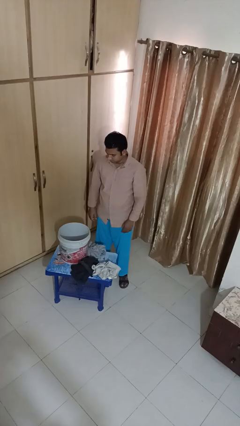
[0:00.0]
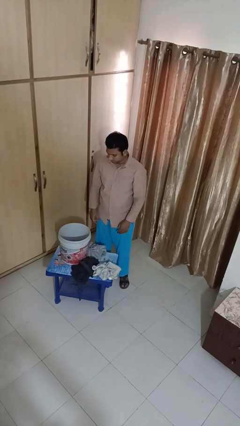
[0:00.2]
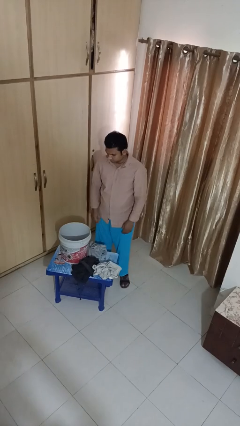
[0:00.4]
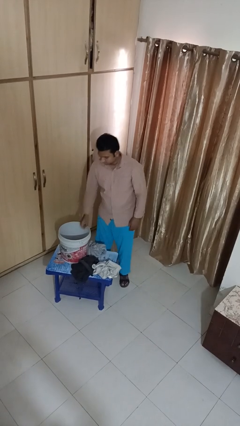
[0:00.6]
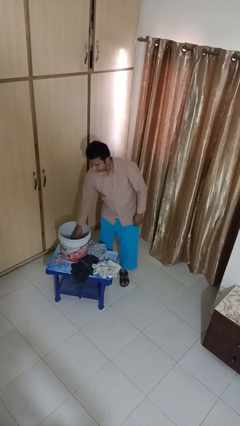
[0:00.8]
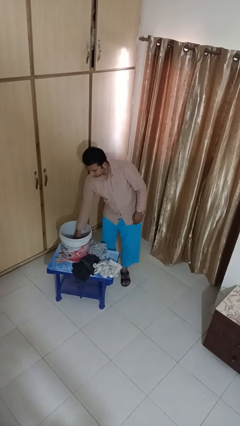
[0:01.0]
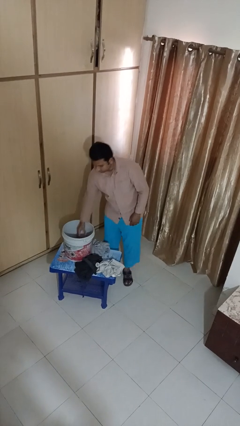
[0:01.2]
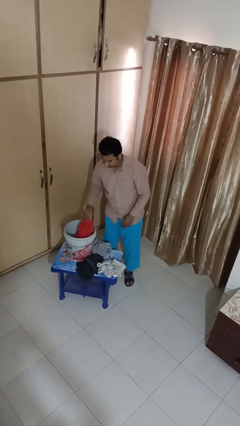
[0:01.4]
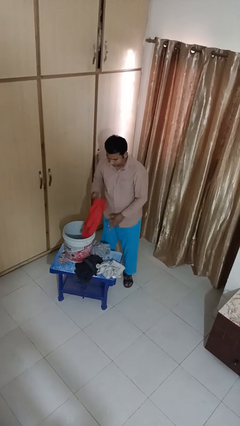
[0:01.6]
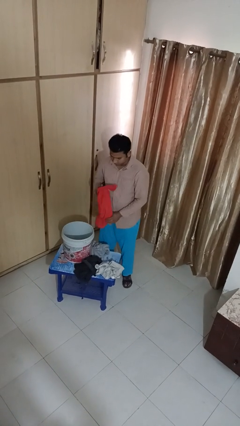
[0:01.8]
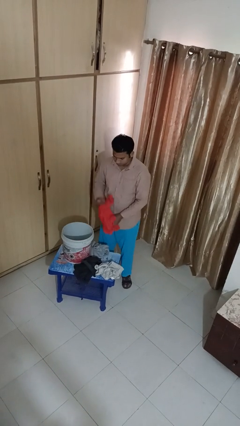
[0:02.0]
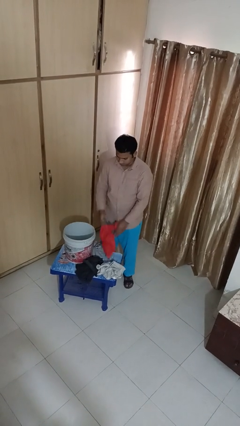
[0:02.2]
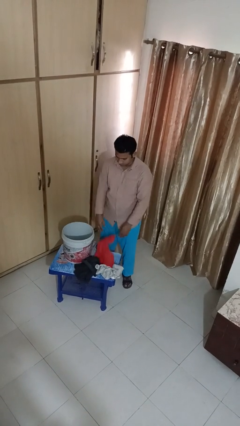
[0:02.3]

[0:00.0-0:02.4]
person takes object from basket

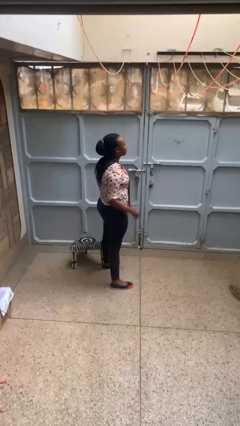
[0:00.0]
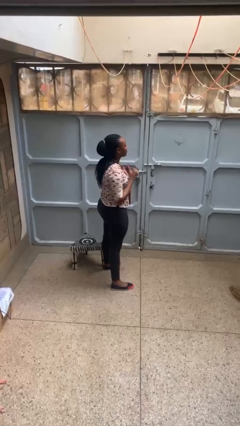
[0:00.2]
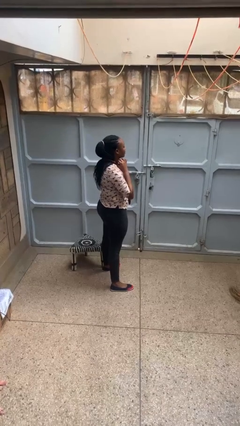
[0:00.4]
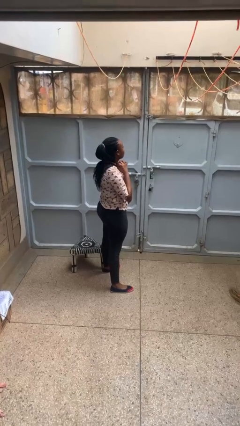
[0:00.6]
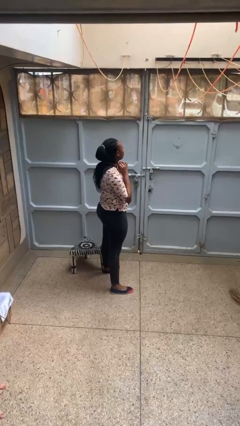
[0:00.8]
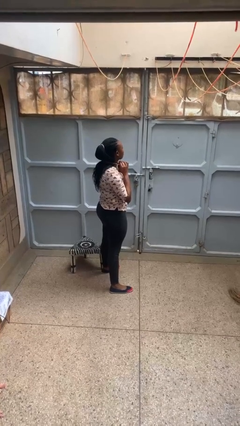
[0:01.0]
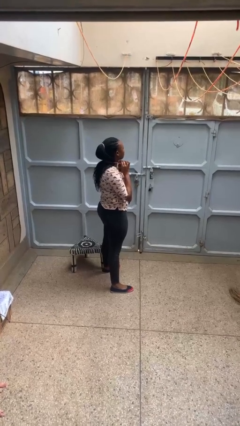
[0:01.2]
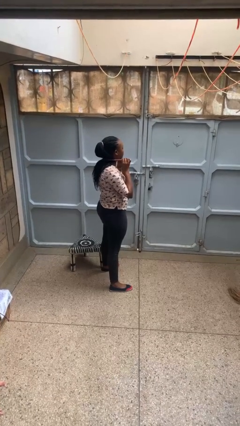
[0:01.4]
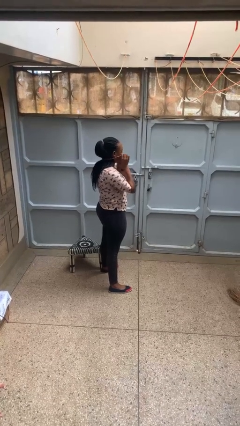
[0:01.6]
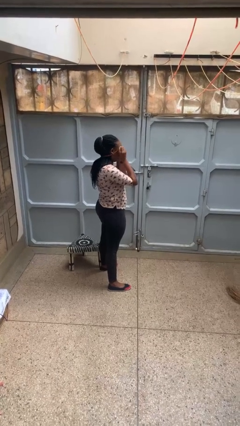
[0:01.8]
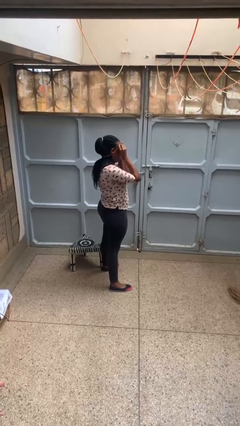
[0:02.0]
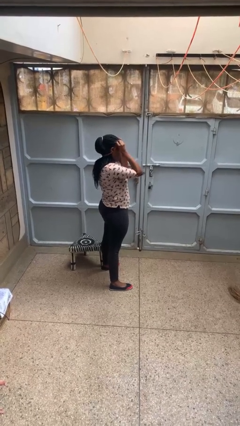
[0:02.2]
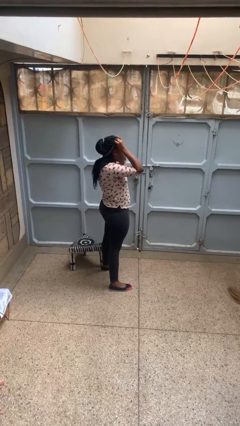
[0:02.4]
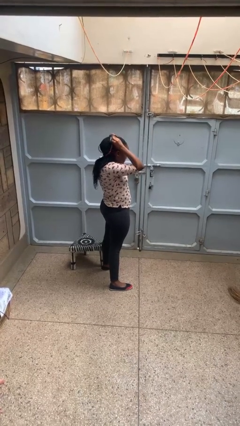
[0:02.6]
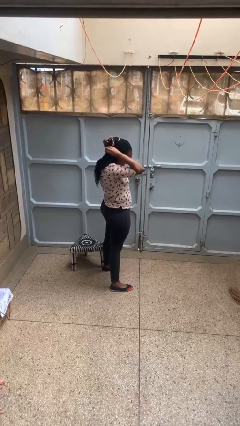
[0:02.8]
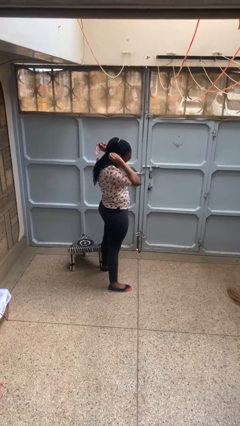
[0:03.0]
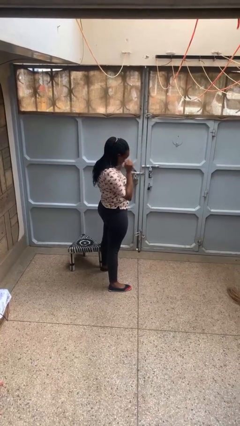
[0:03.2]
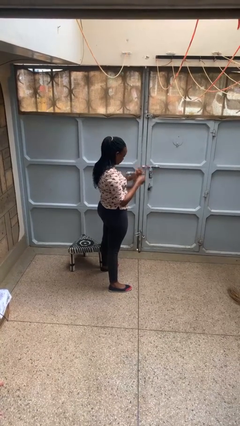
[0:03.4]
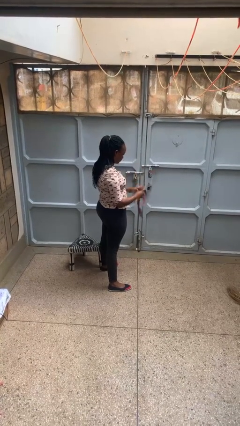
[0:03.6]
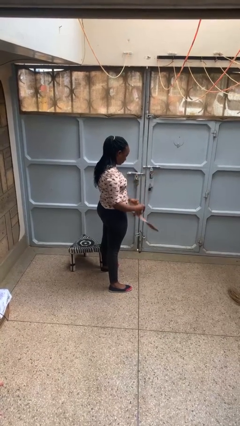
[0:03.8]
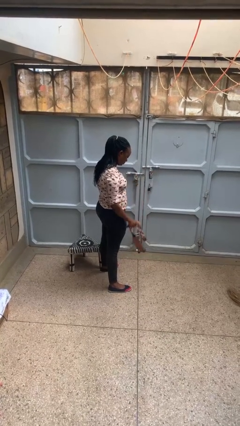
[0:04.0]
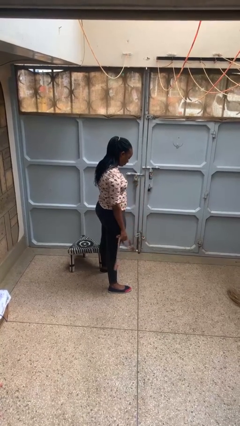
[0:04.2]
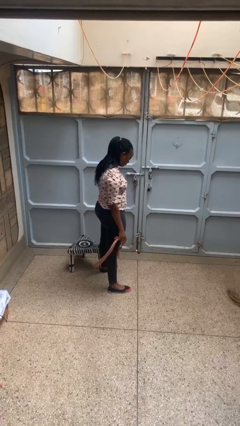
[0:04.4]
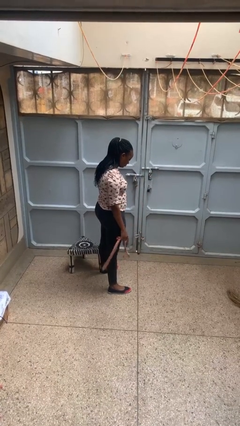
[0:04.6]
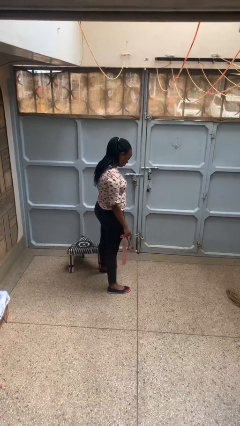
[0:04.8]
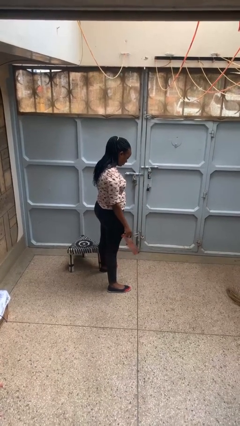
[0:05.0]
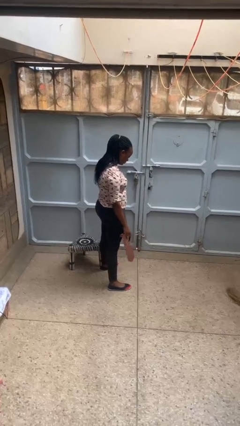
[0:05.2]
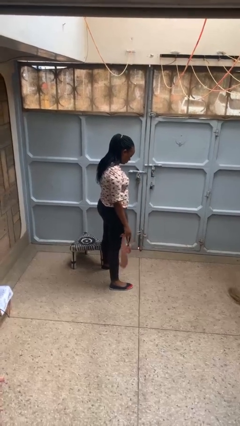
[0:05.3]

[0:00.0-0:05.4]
person takes off necktie

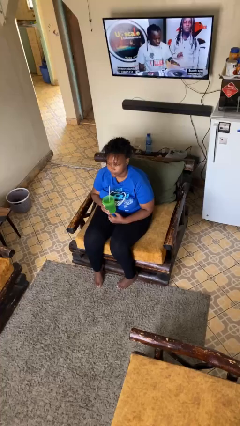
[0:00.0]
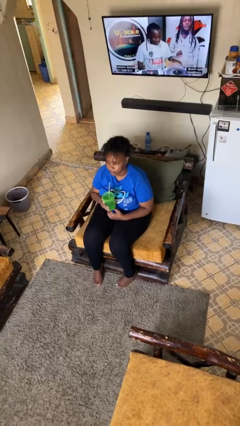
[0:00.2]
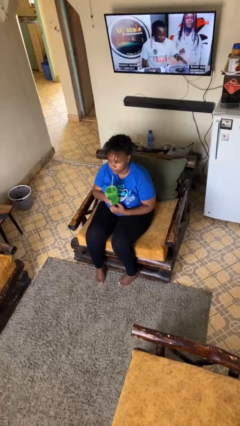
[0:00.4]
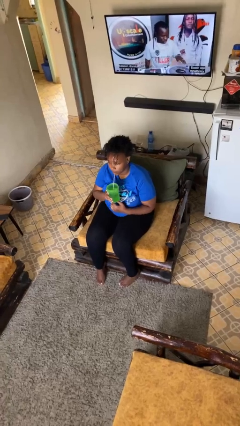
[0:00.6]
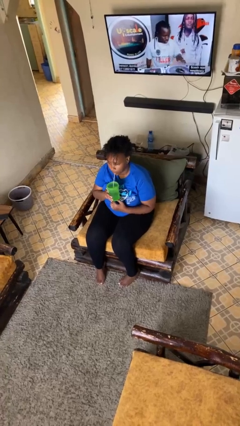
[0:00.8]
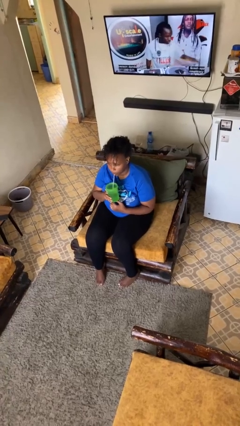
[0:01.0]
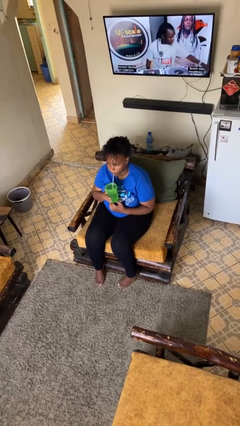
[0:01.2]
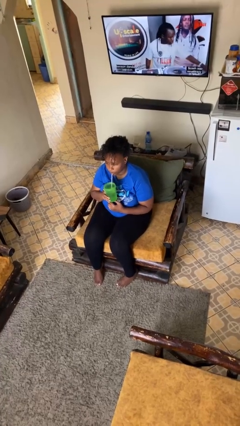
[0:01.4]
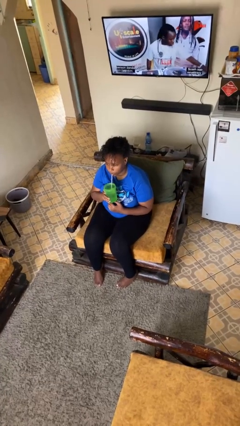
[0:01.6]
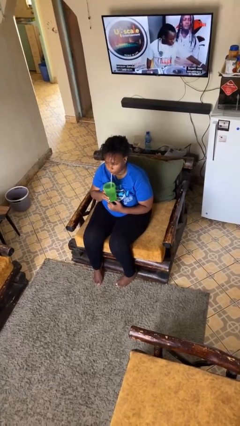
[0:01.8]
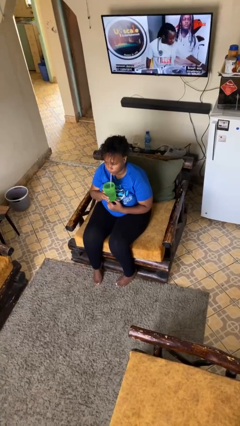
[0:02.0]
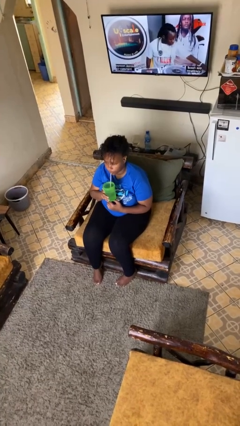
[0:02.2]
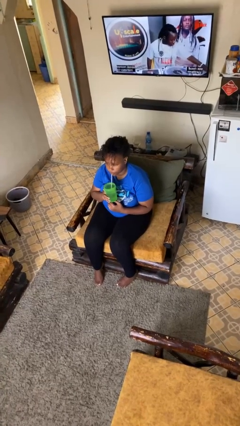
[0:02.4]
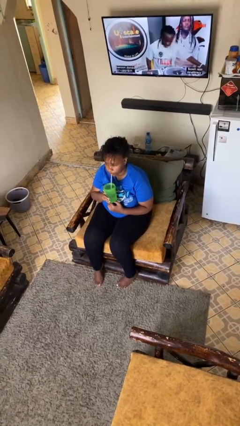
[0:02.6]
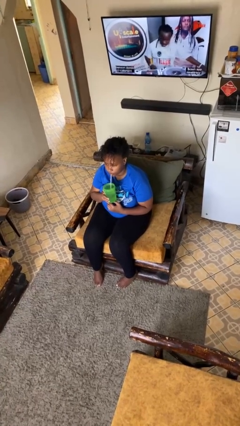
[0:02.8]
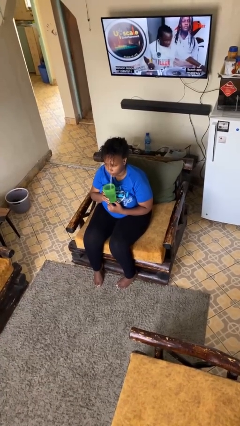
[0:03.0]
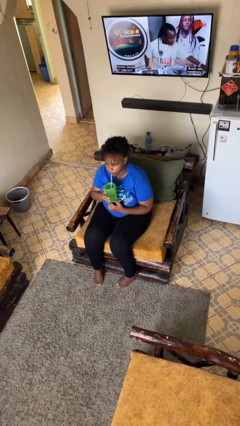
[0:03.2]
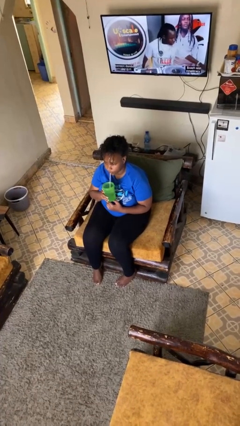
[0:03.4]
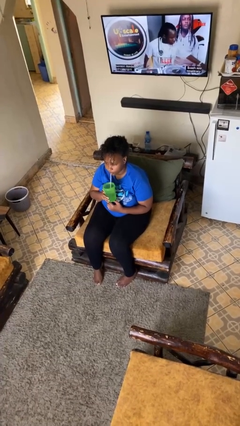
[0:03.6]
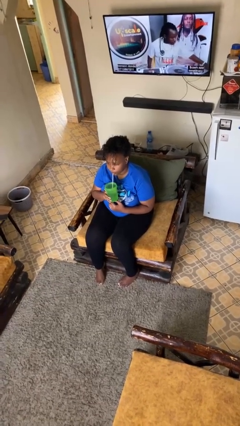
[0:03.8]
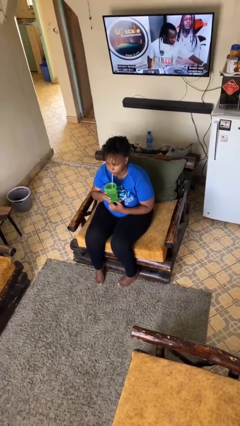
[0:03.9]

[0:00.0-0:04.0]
person drinks from straw

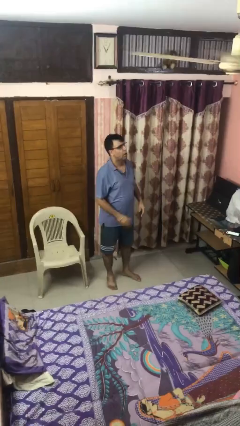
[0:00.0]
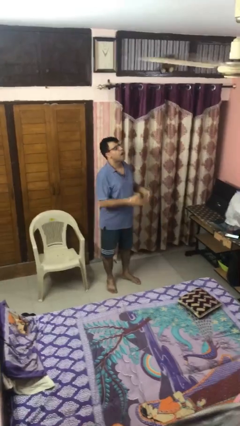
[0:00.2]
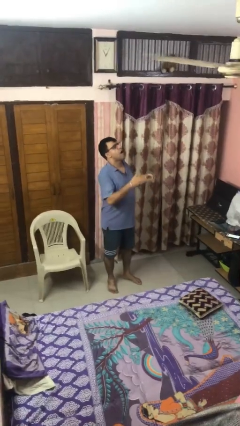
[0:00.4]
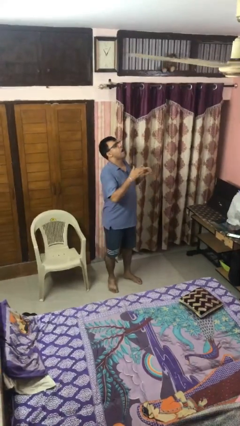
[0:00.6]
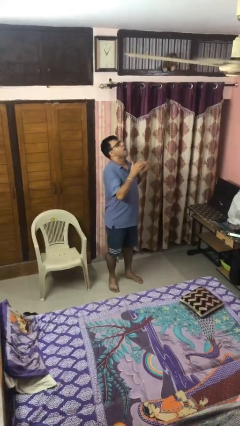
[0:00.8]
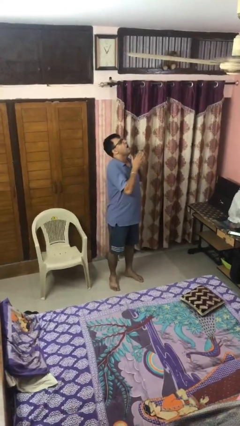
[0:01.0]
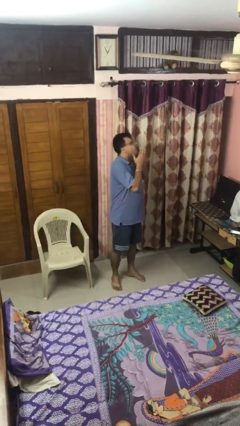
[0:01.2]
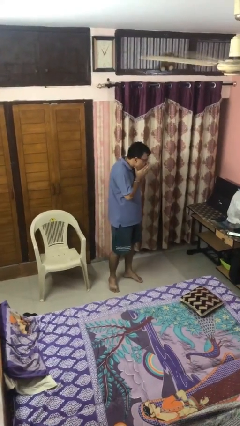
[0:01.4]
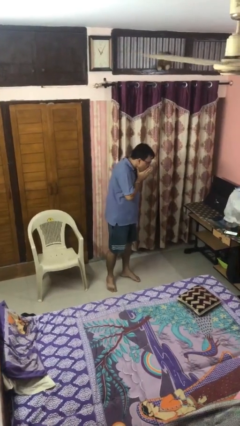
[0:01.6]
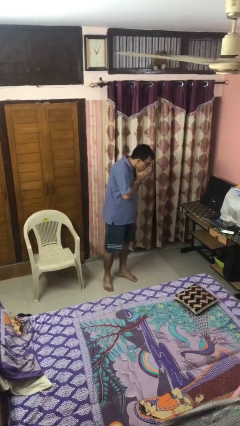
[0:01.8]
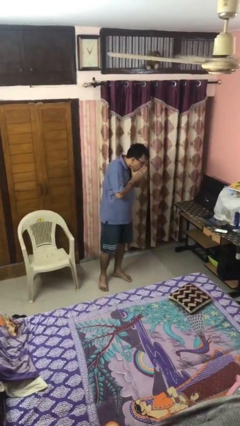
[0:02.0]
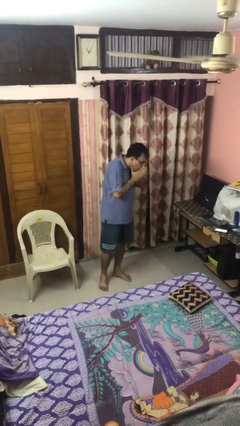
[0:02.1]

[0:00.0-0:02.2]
person sneezes into hand

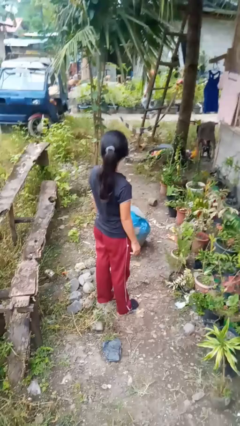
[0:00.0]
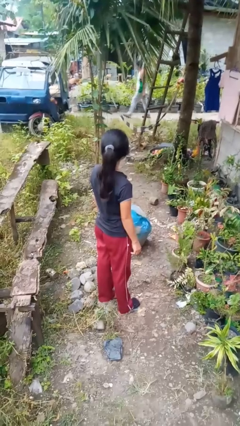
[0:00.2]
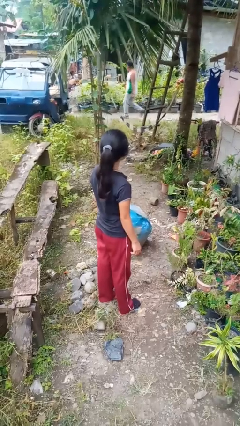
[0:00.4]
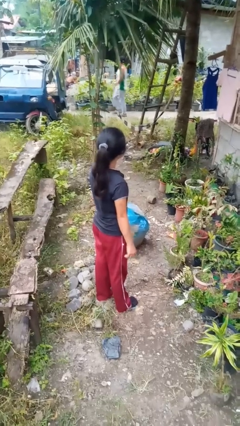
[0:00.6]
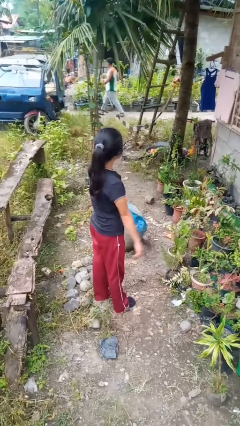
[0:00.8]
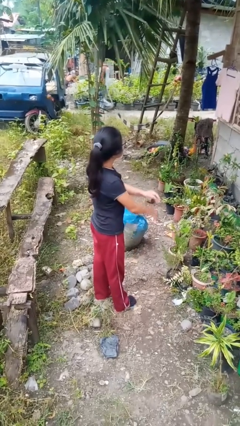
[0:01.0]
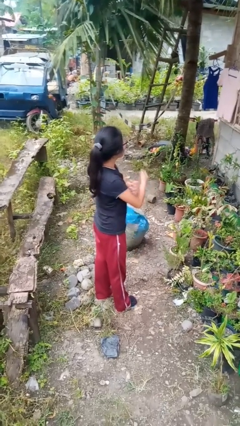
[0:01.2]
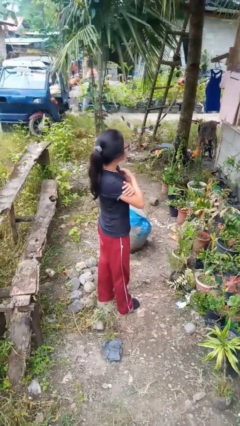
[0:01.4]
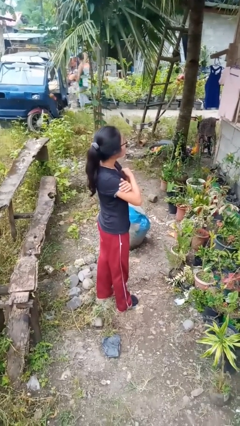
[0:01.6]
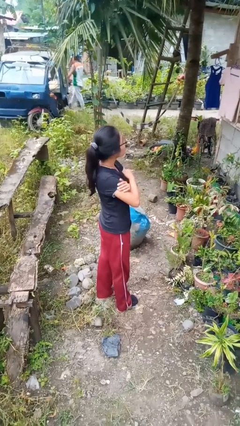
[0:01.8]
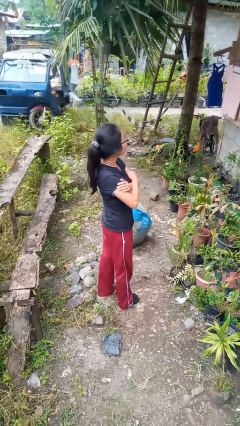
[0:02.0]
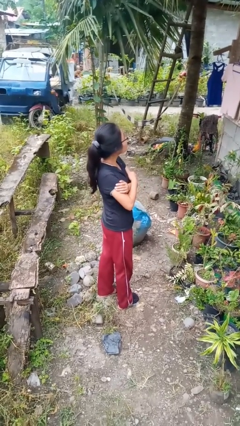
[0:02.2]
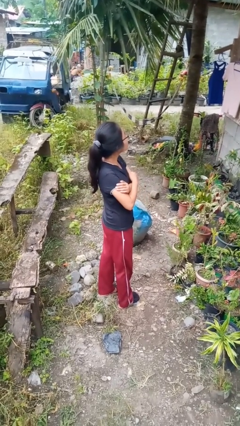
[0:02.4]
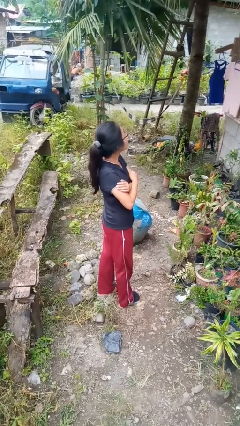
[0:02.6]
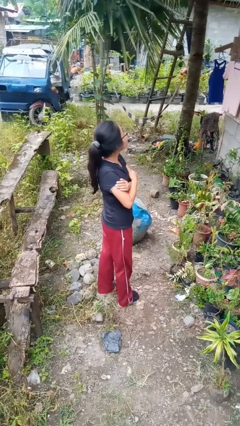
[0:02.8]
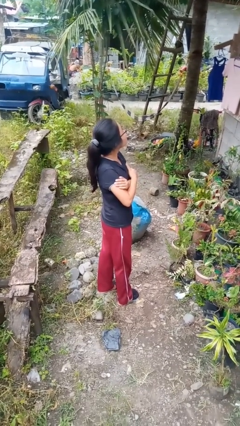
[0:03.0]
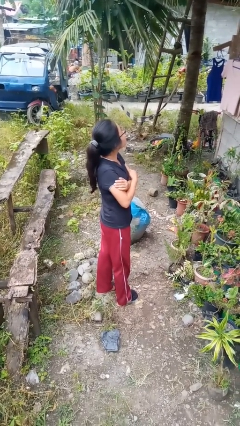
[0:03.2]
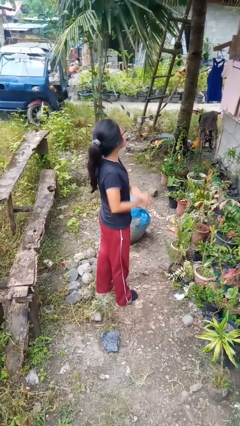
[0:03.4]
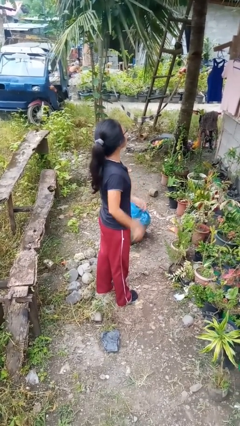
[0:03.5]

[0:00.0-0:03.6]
person crosses arms
